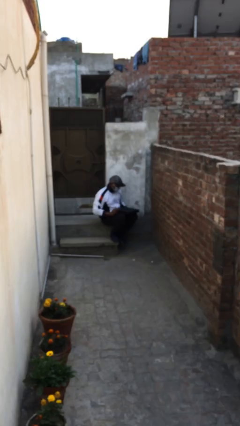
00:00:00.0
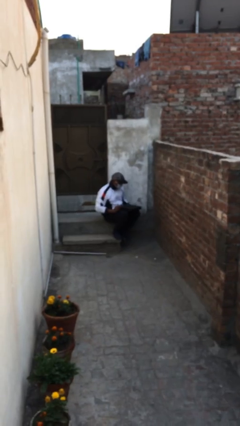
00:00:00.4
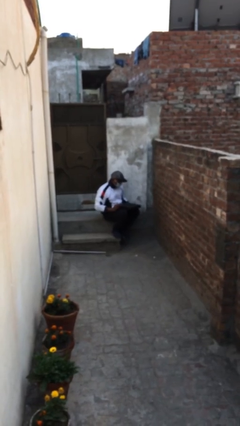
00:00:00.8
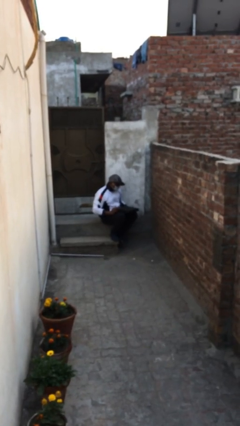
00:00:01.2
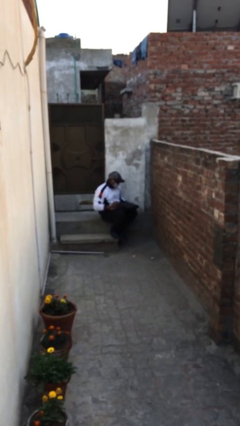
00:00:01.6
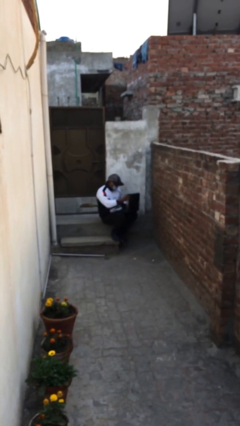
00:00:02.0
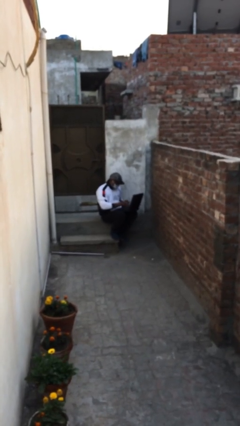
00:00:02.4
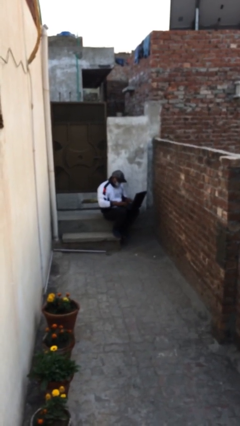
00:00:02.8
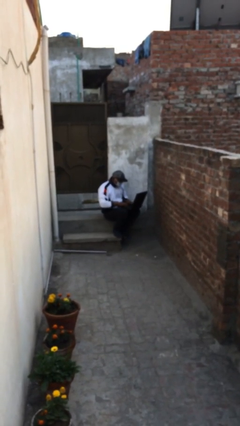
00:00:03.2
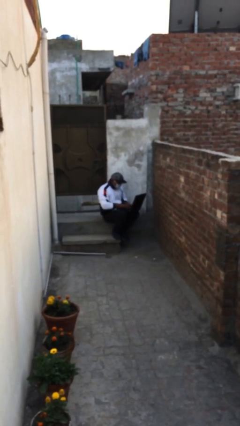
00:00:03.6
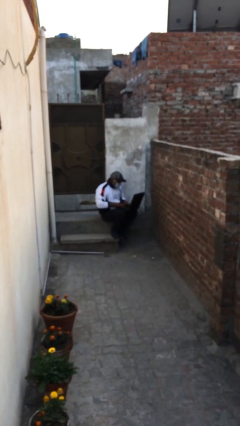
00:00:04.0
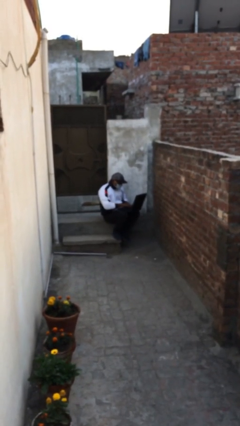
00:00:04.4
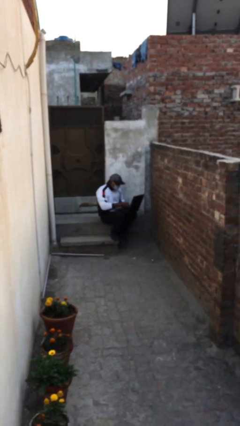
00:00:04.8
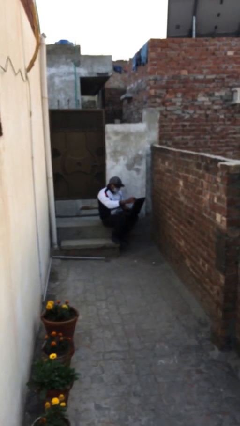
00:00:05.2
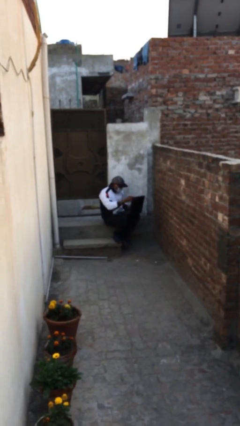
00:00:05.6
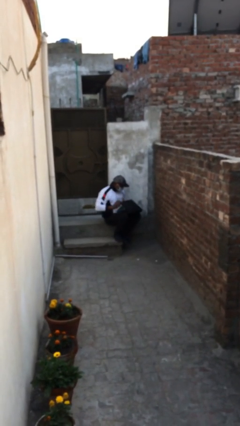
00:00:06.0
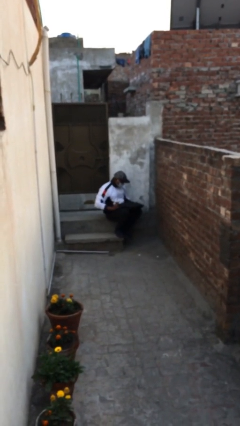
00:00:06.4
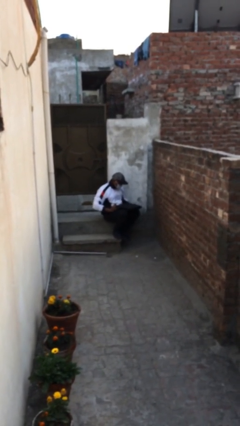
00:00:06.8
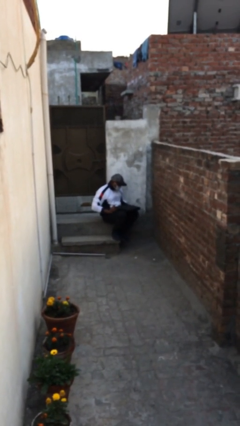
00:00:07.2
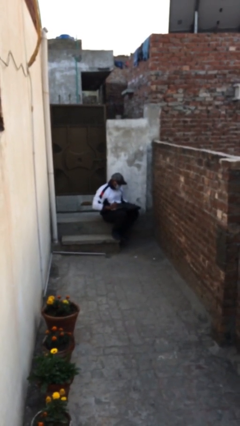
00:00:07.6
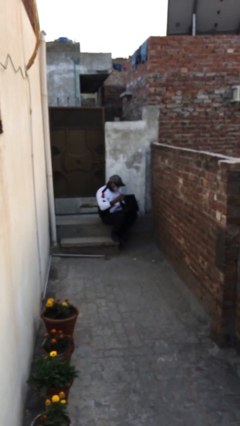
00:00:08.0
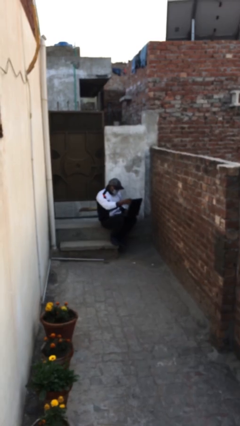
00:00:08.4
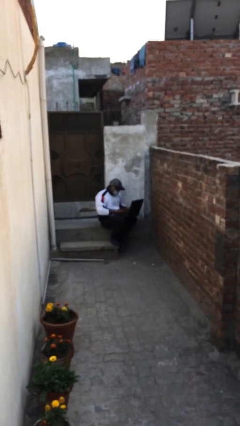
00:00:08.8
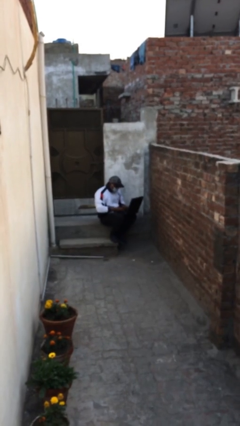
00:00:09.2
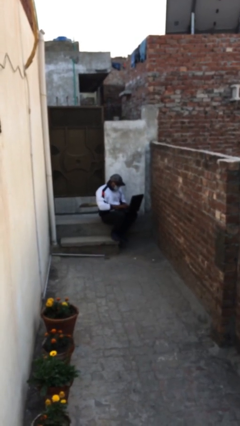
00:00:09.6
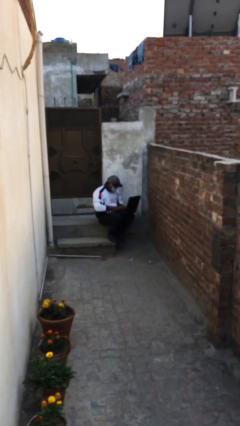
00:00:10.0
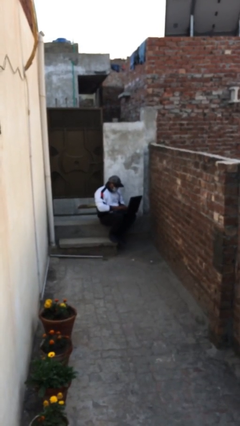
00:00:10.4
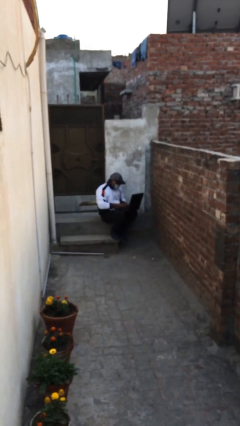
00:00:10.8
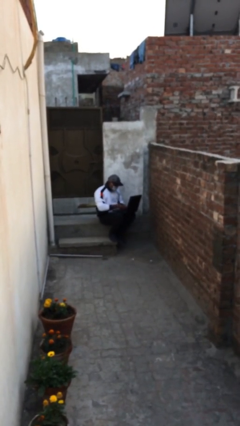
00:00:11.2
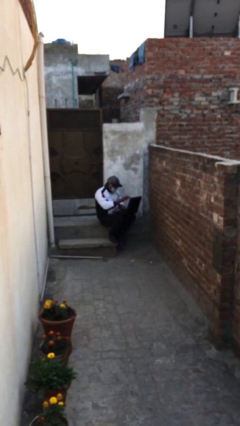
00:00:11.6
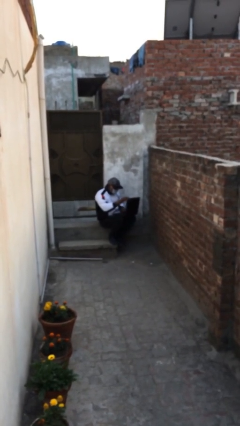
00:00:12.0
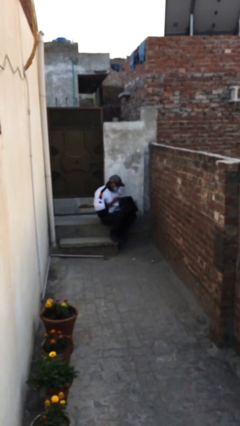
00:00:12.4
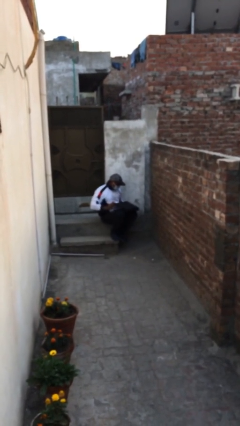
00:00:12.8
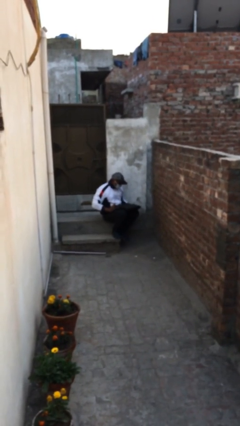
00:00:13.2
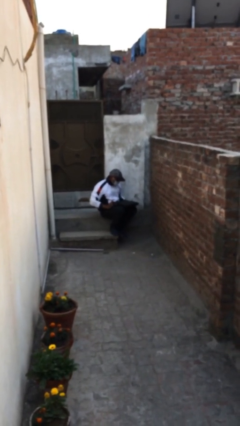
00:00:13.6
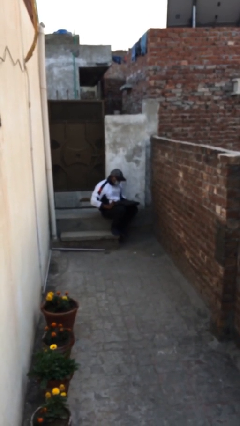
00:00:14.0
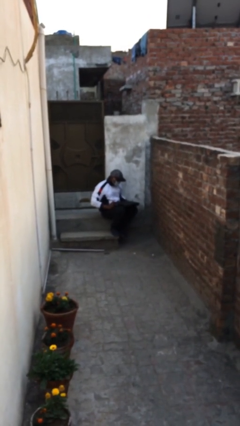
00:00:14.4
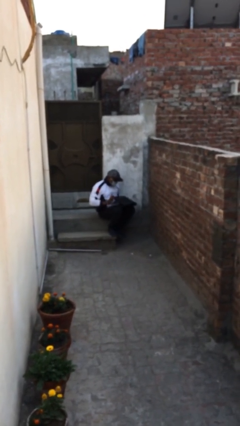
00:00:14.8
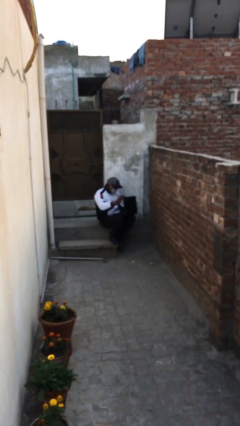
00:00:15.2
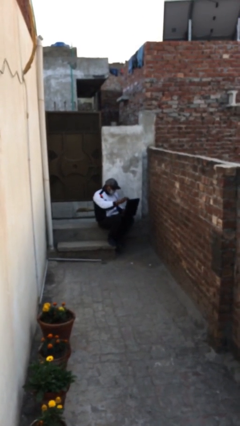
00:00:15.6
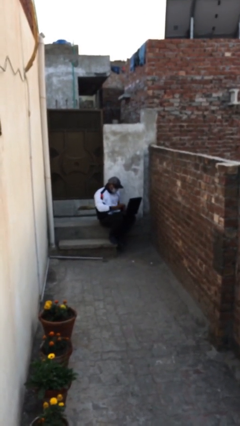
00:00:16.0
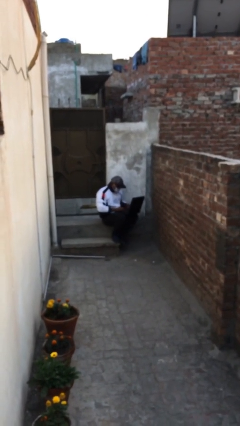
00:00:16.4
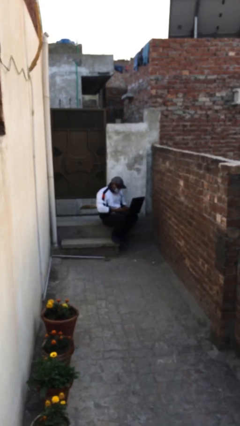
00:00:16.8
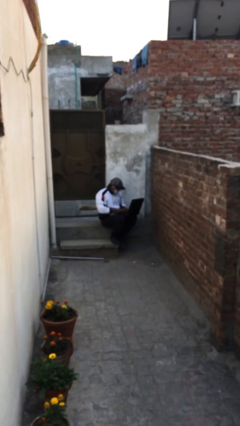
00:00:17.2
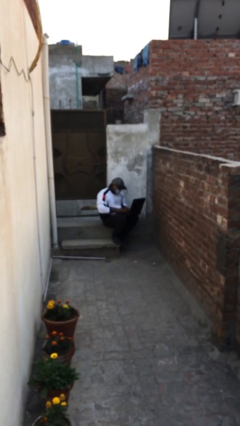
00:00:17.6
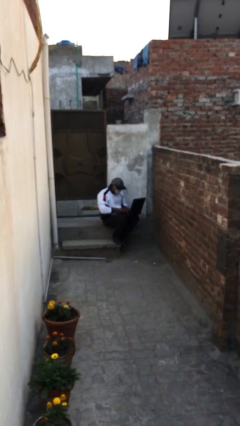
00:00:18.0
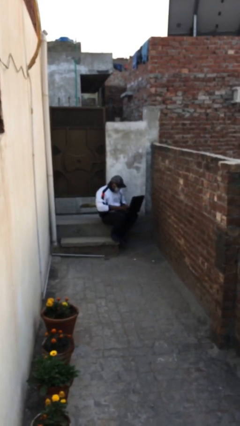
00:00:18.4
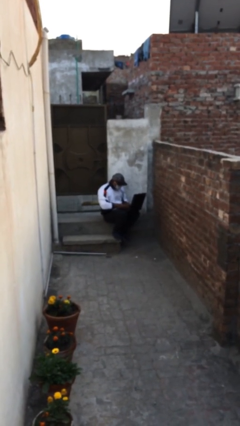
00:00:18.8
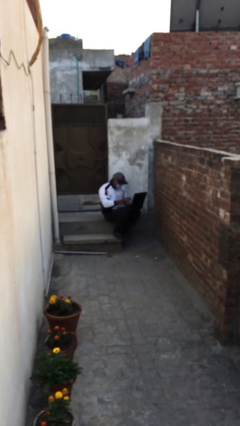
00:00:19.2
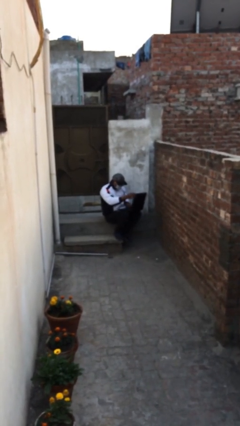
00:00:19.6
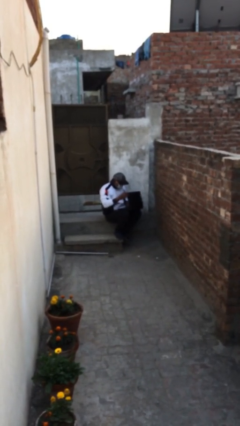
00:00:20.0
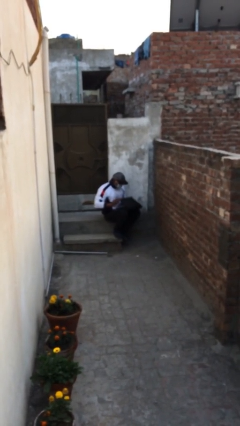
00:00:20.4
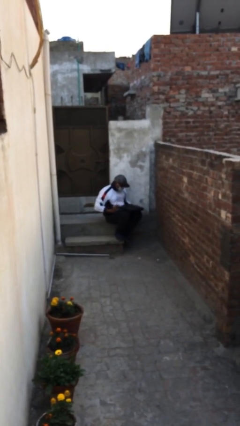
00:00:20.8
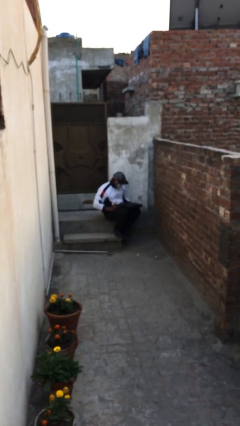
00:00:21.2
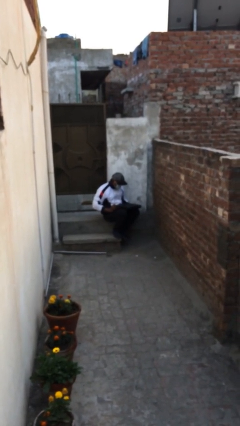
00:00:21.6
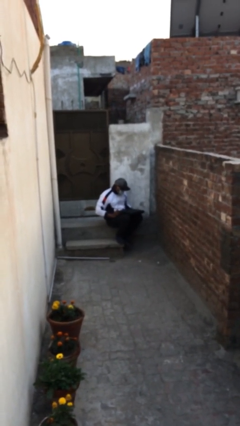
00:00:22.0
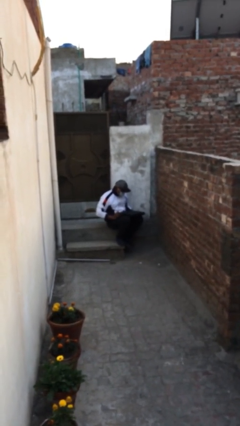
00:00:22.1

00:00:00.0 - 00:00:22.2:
person interacts with laptop

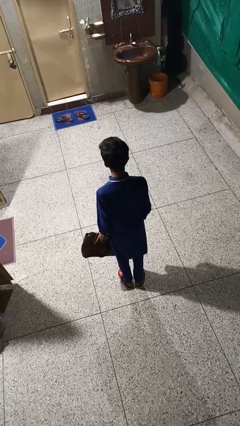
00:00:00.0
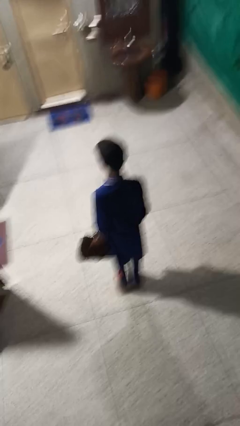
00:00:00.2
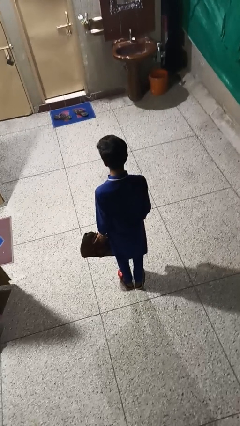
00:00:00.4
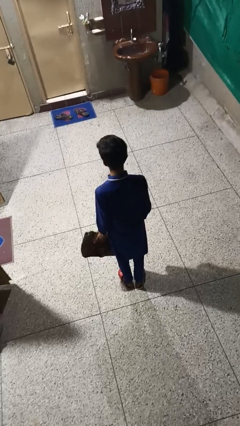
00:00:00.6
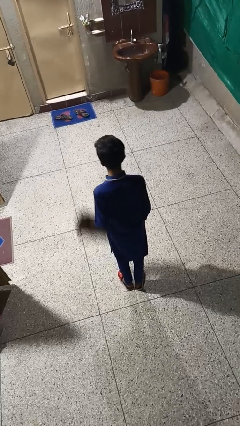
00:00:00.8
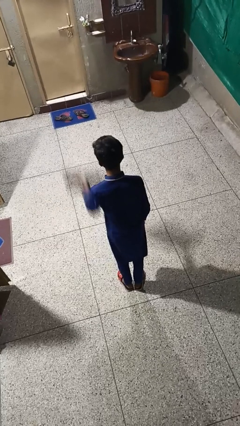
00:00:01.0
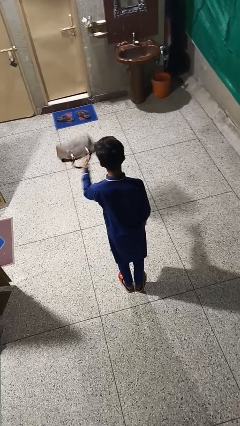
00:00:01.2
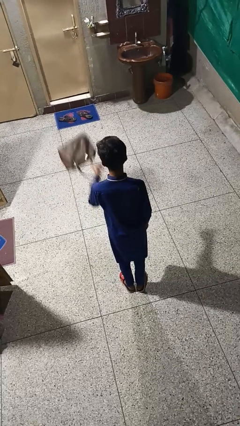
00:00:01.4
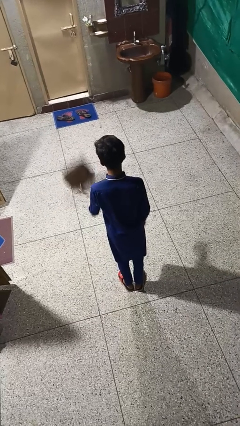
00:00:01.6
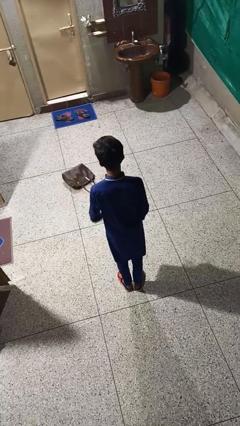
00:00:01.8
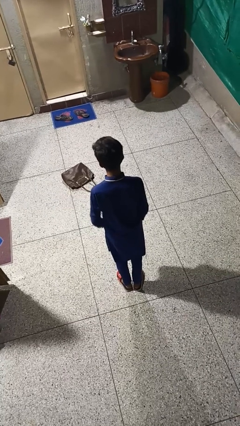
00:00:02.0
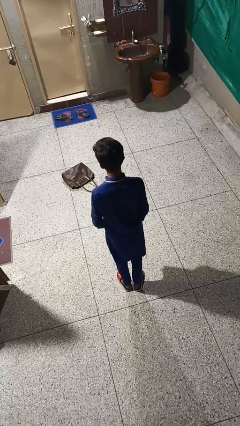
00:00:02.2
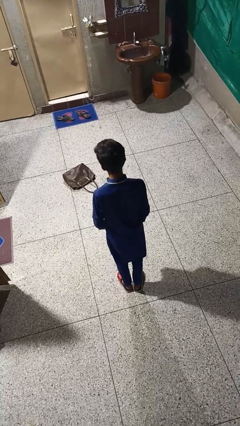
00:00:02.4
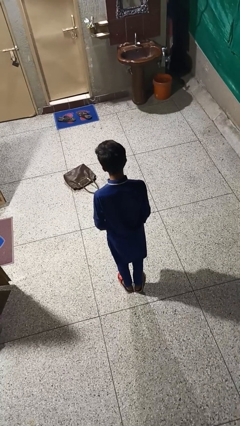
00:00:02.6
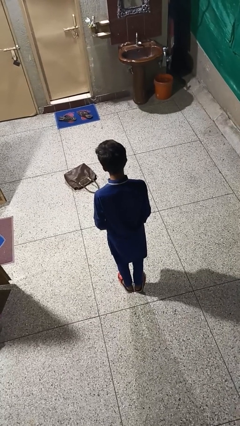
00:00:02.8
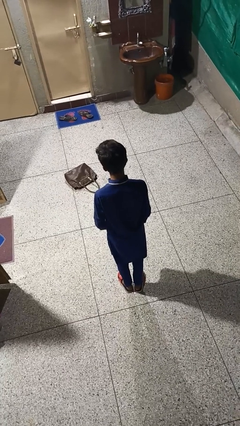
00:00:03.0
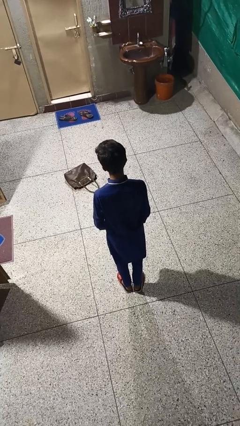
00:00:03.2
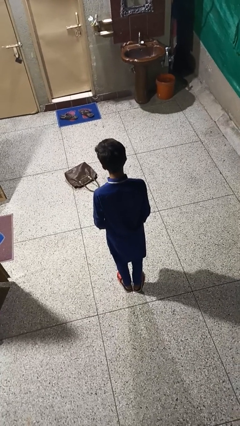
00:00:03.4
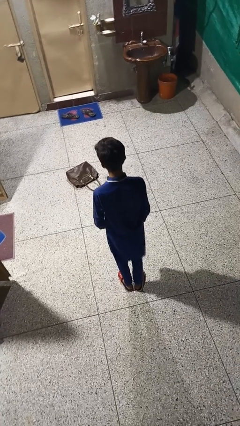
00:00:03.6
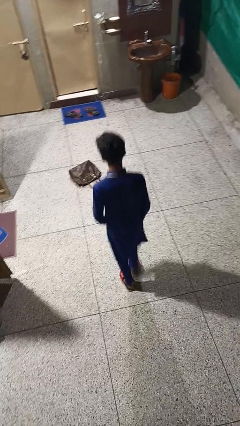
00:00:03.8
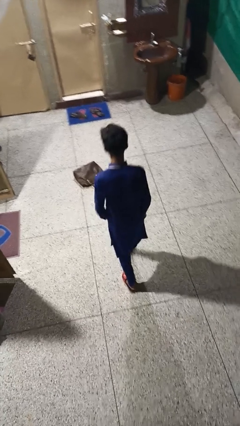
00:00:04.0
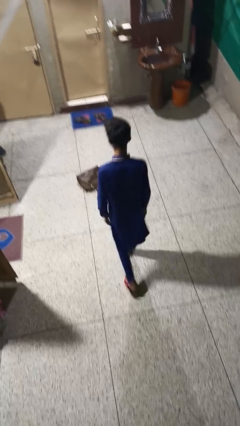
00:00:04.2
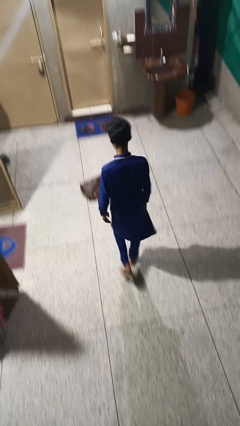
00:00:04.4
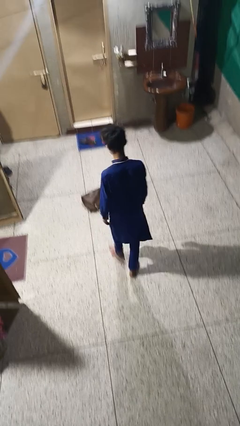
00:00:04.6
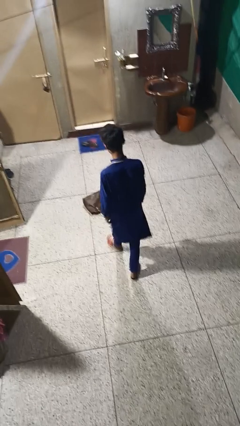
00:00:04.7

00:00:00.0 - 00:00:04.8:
person throws object to ground

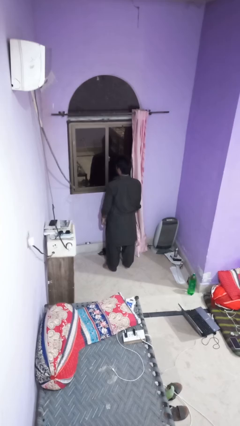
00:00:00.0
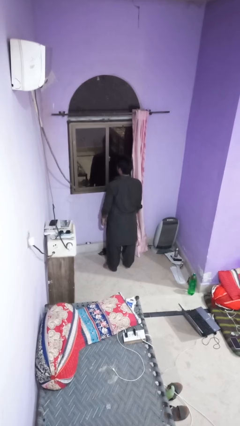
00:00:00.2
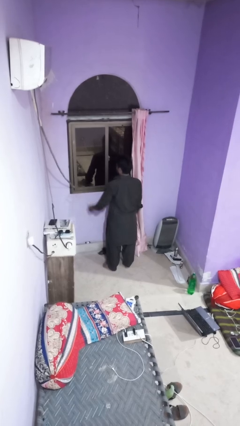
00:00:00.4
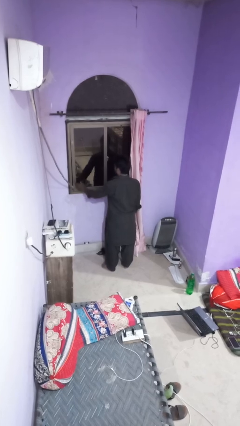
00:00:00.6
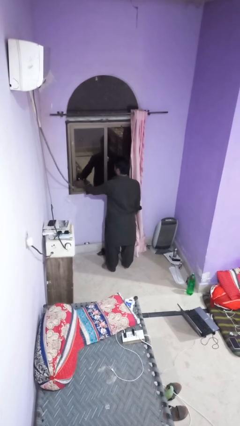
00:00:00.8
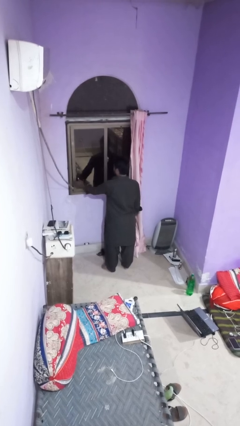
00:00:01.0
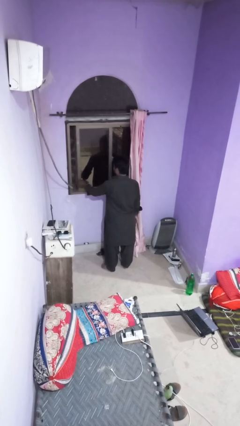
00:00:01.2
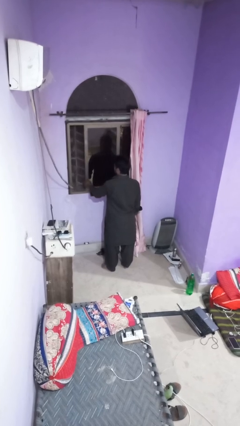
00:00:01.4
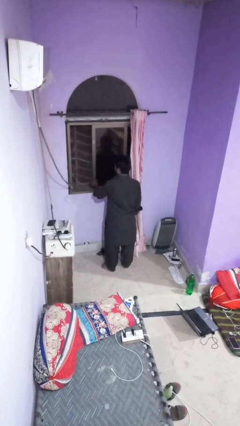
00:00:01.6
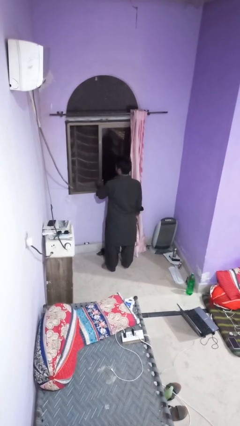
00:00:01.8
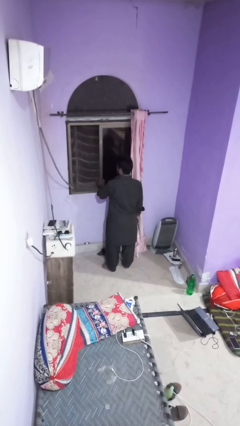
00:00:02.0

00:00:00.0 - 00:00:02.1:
person opens home window
